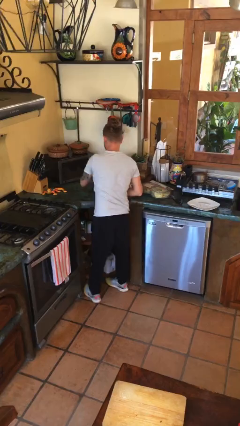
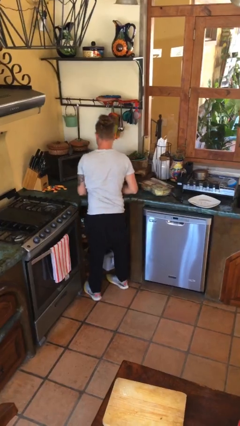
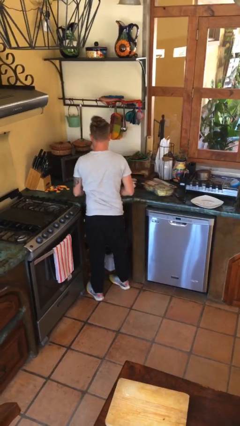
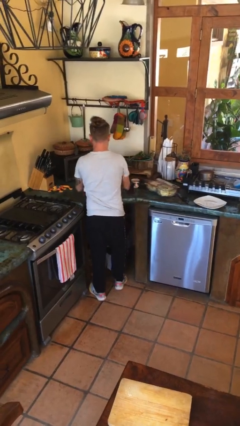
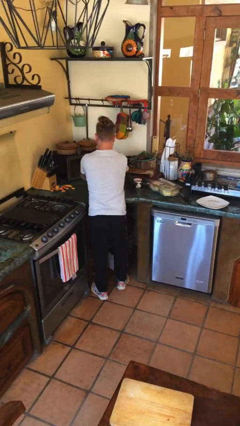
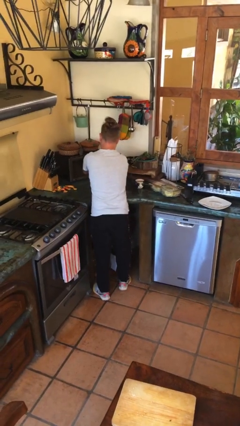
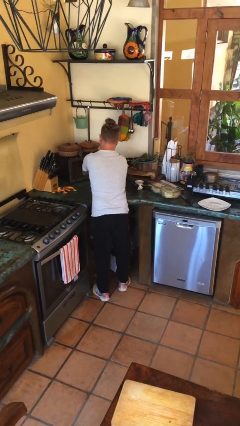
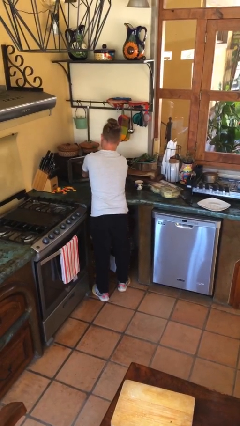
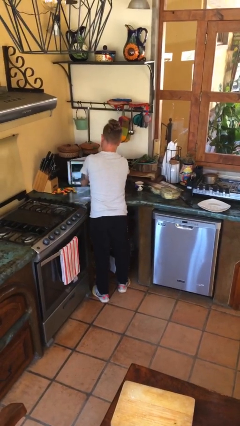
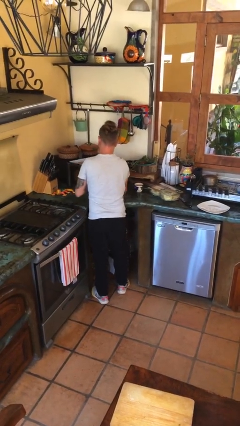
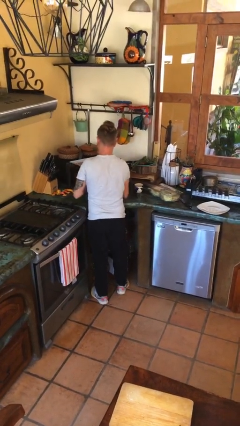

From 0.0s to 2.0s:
person opens microwave

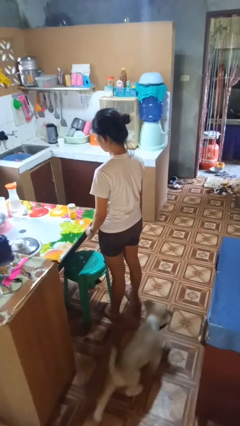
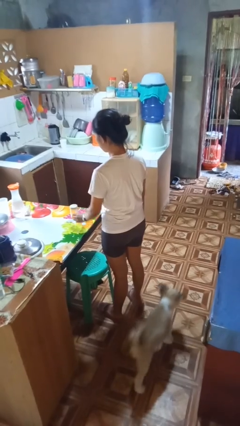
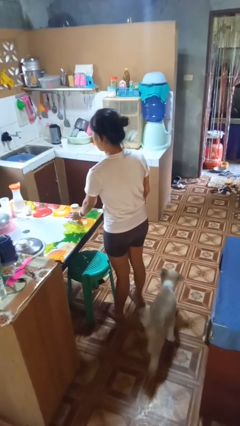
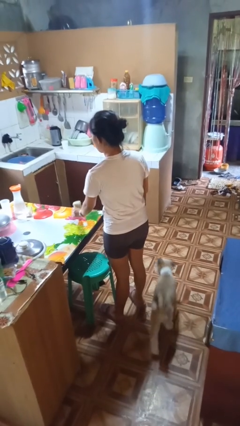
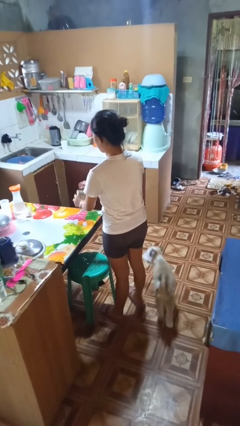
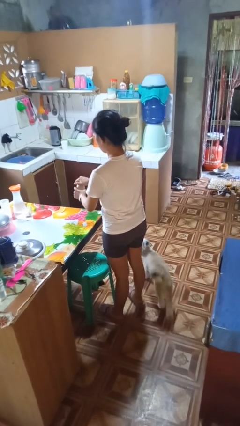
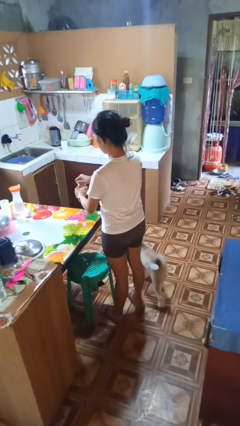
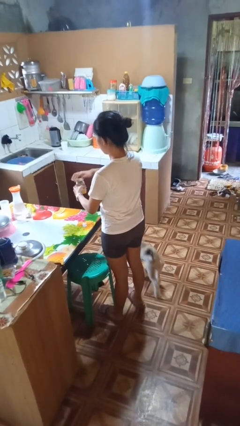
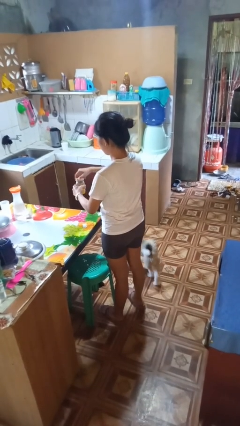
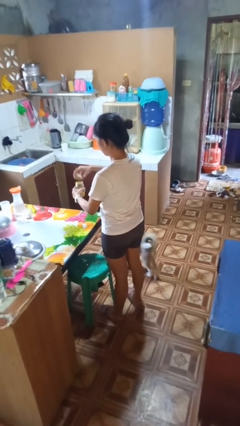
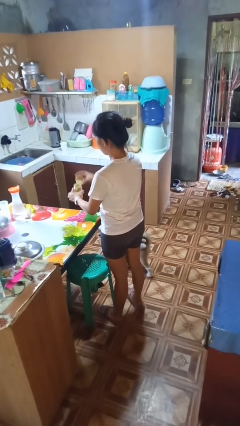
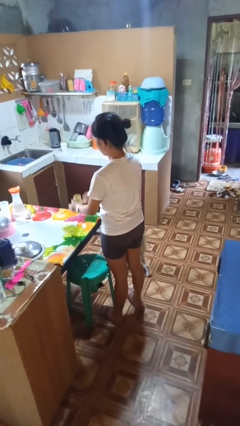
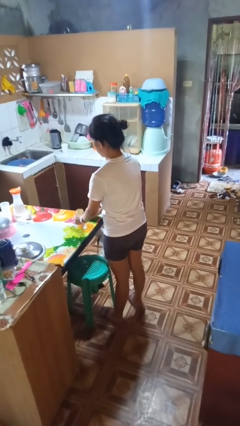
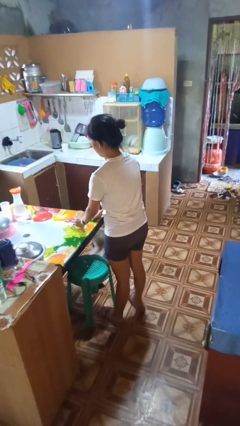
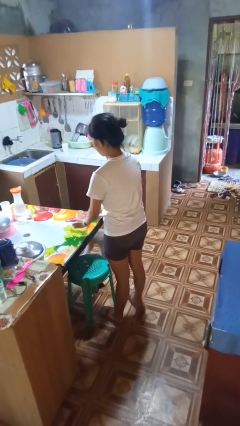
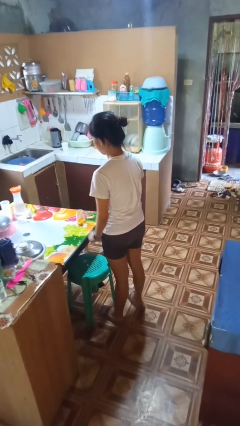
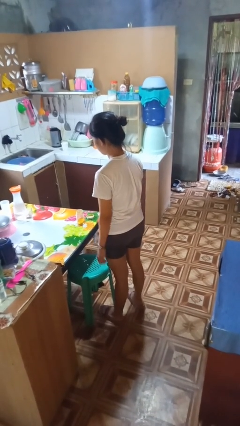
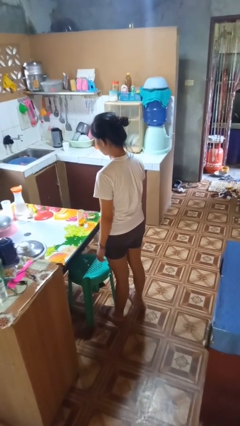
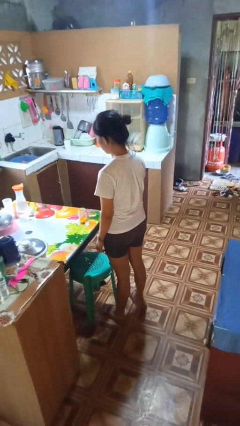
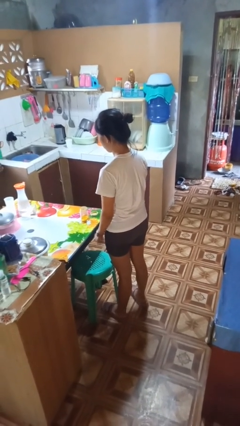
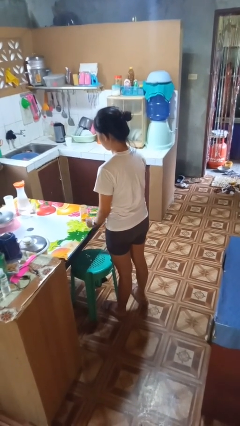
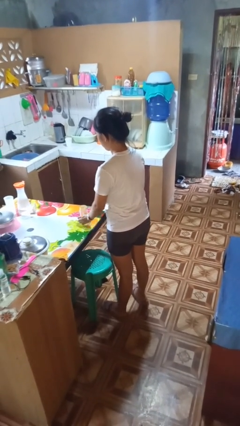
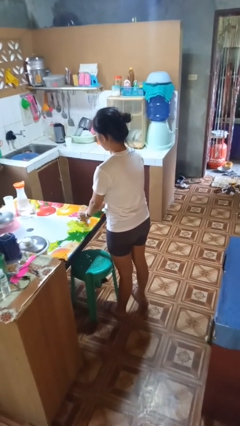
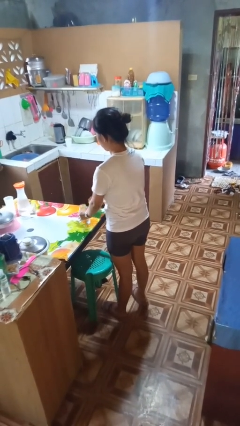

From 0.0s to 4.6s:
person opens jar

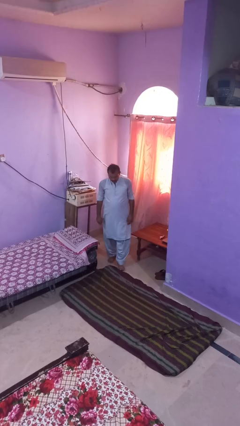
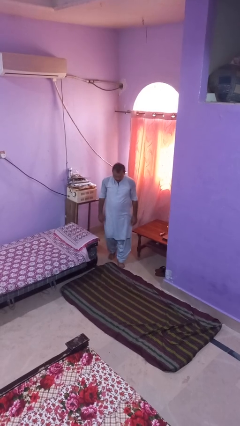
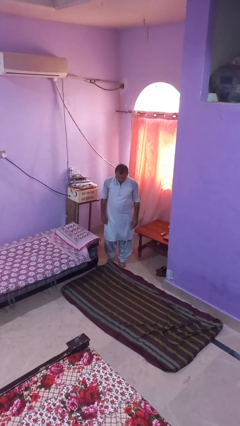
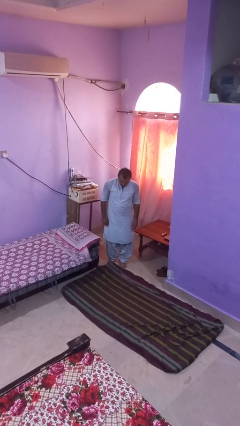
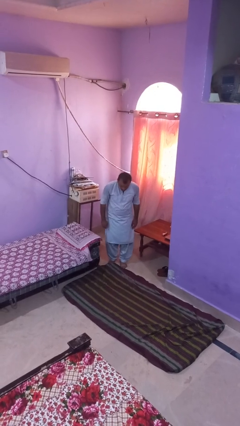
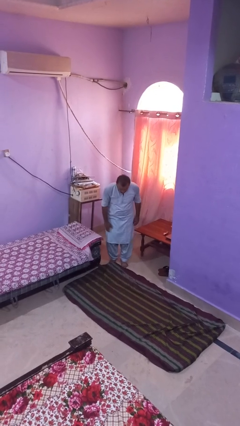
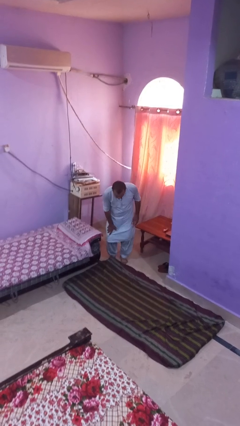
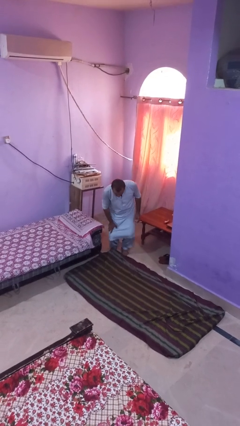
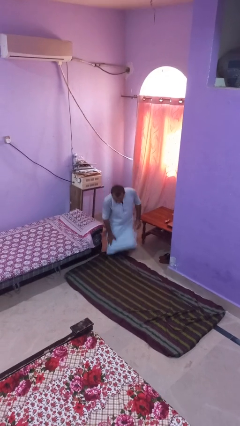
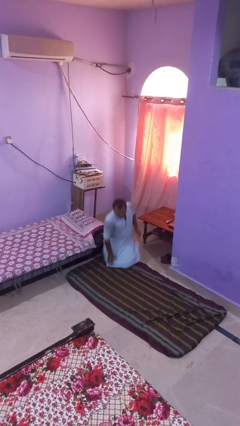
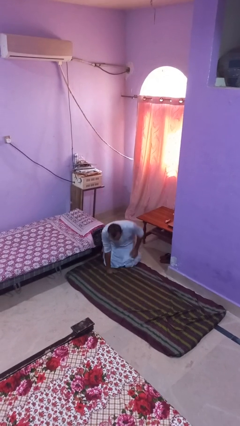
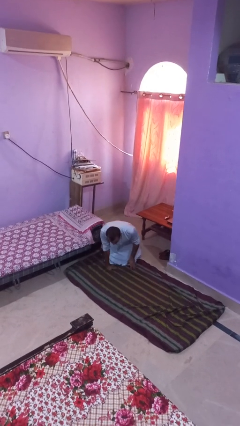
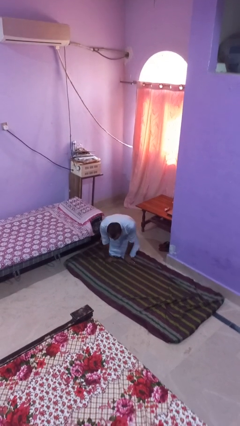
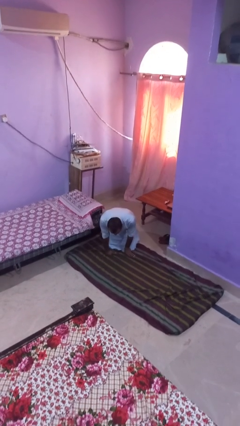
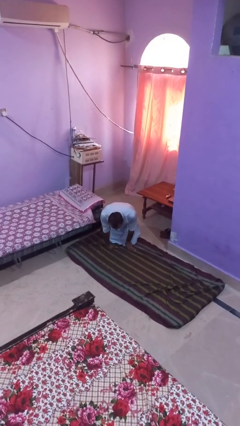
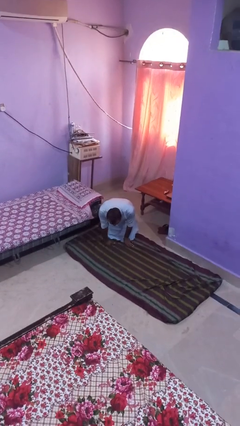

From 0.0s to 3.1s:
person trips on object on floor

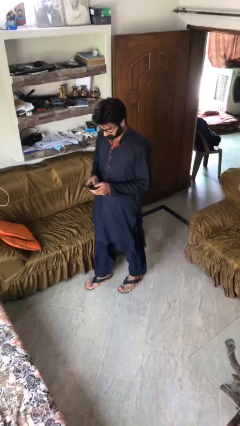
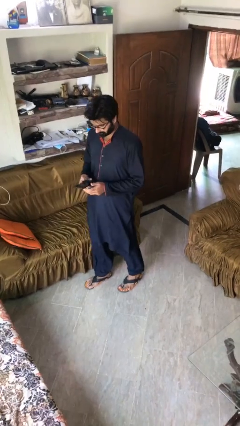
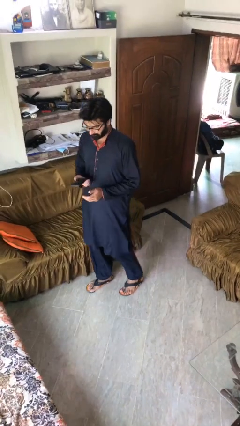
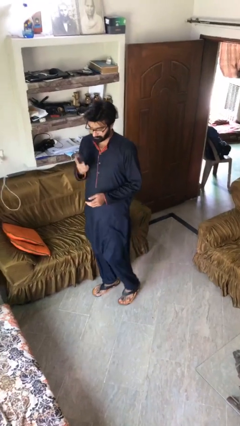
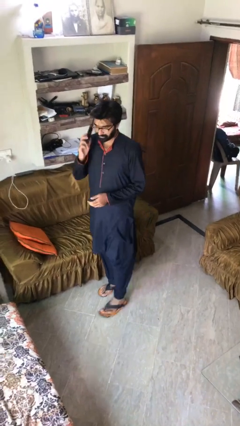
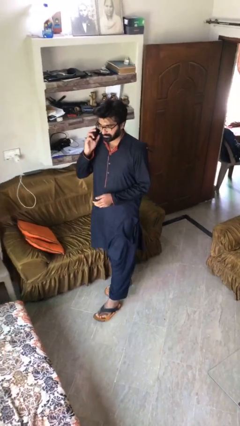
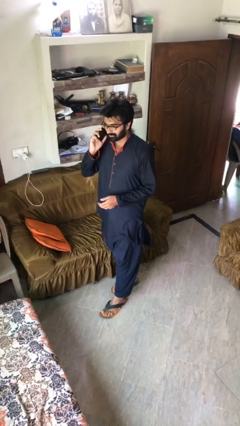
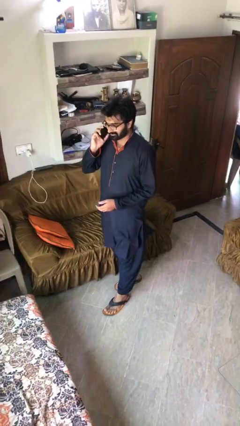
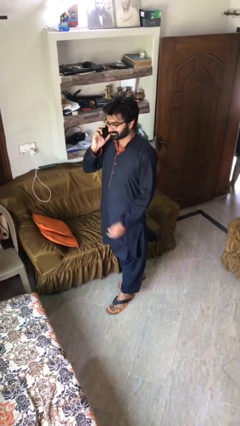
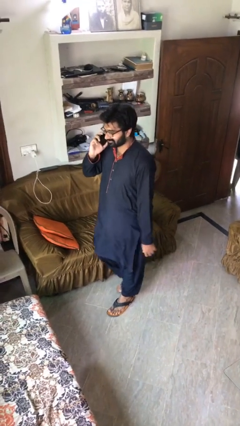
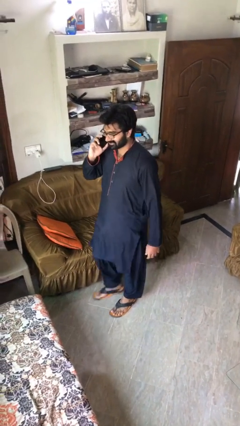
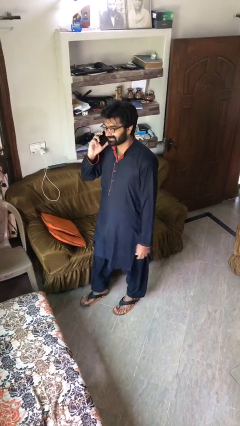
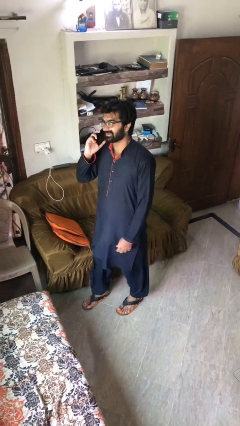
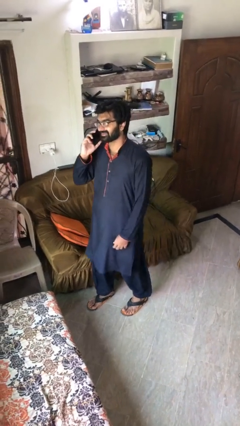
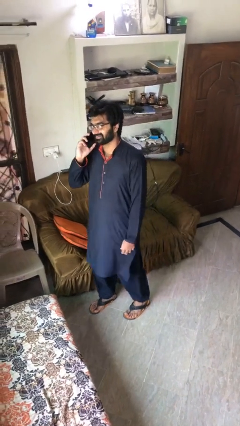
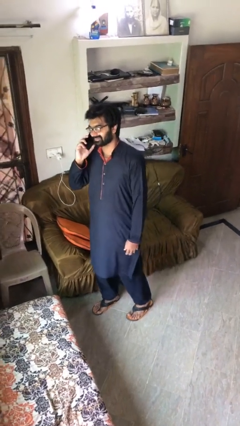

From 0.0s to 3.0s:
person talks on phone

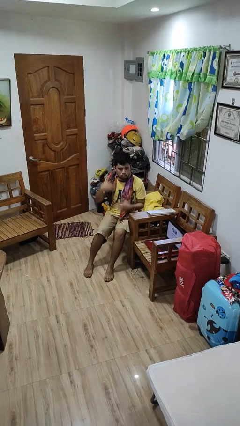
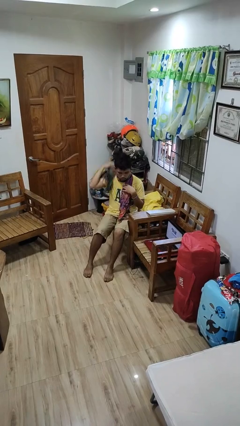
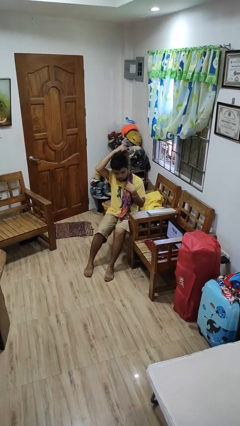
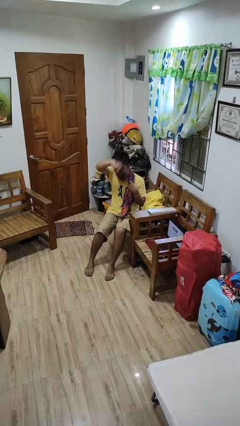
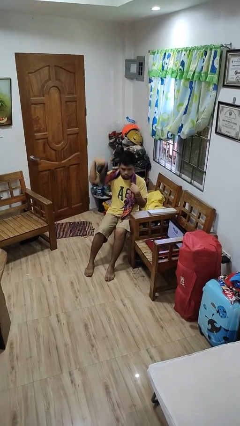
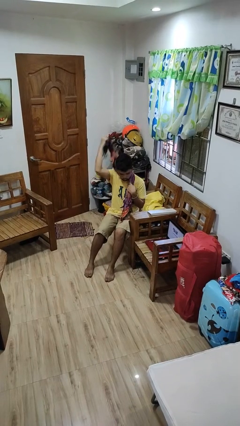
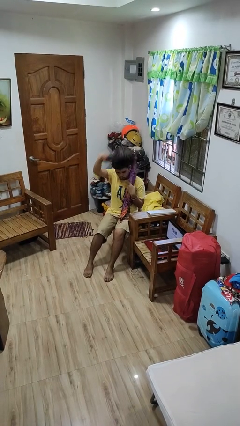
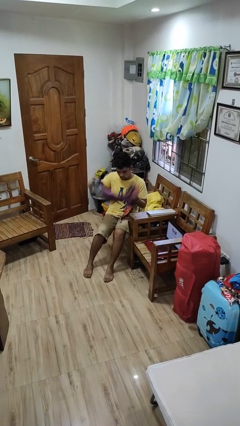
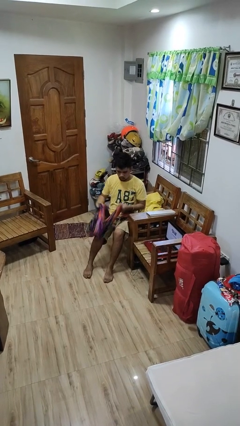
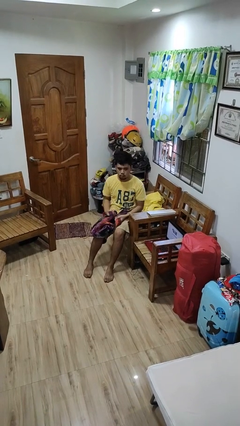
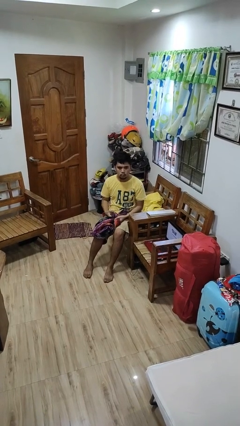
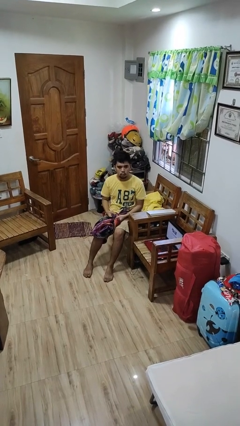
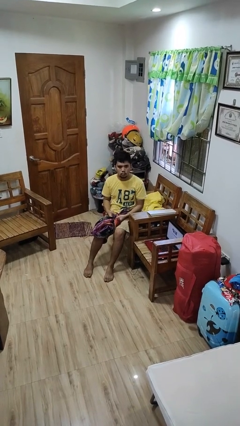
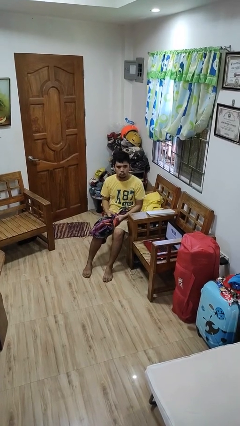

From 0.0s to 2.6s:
person takes off scarf

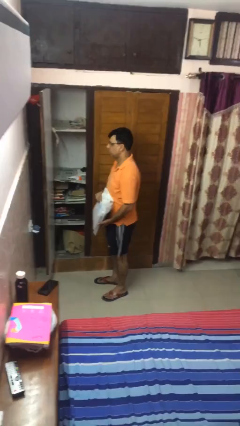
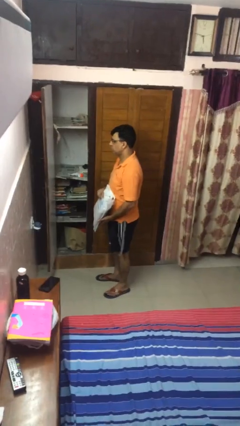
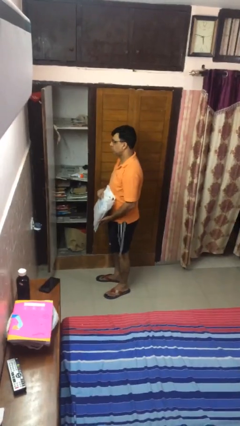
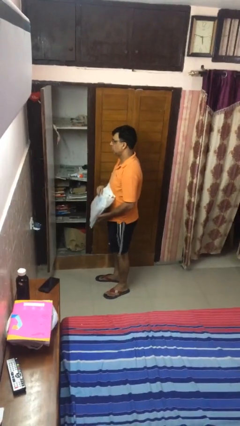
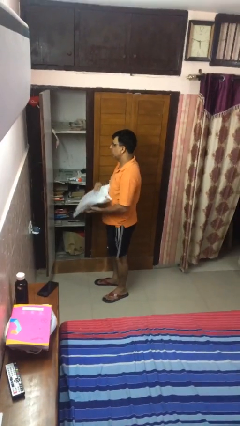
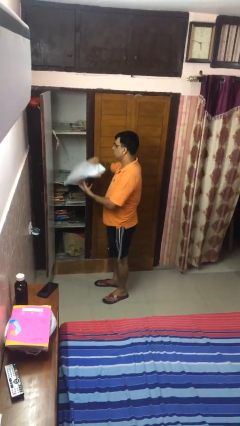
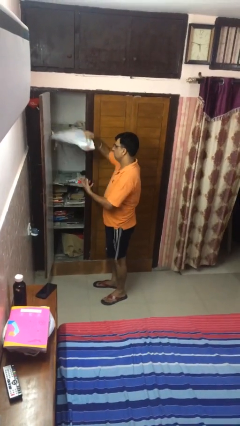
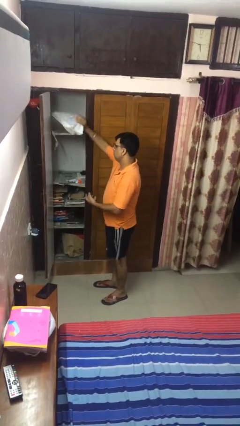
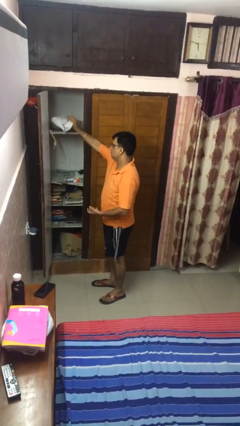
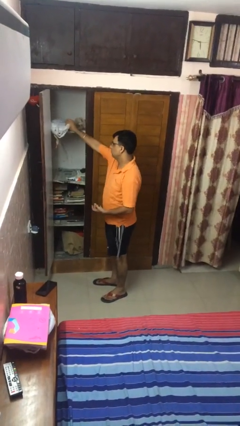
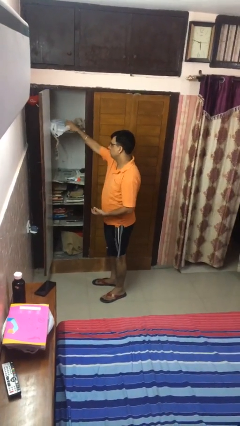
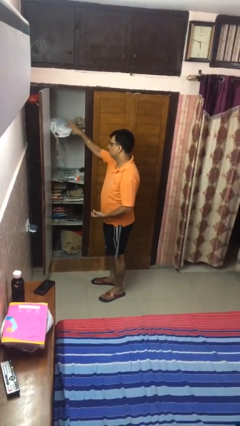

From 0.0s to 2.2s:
person puts down object on shelf
